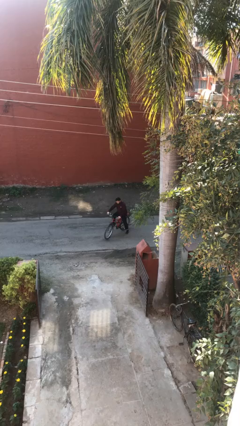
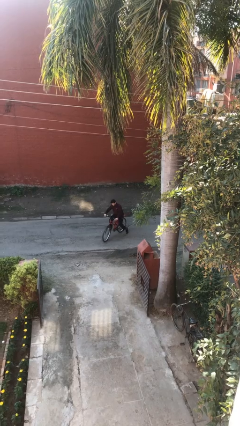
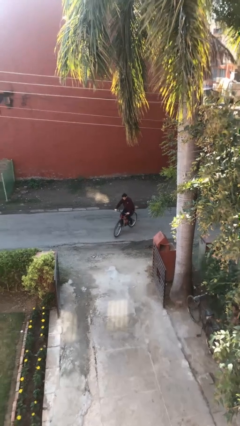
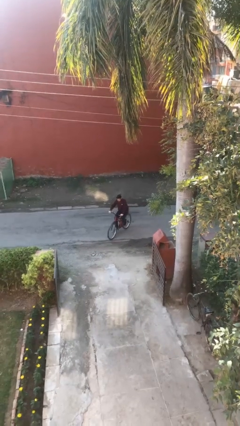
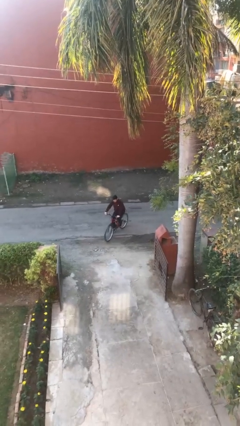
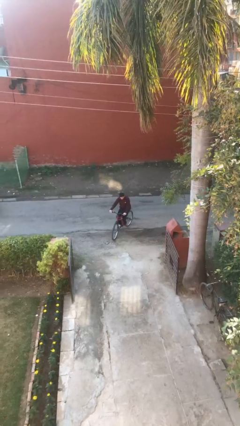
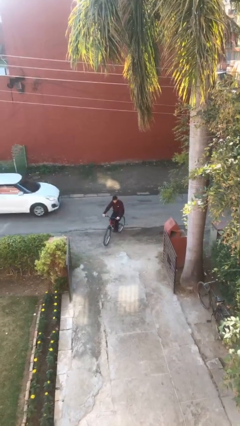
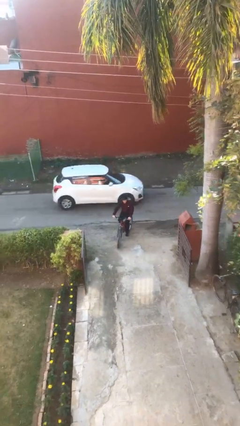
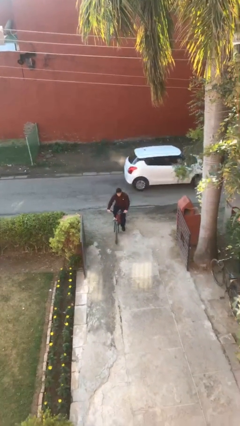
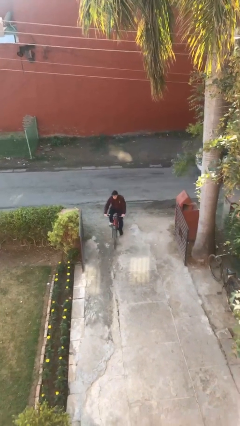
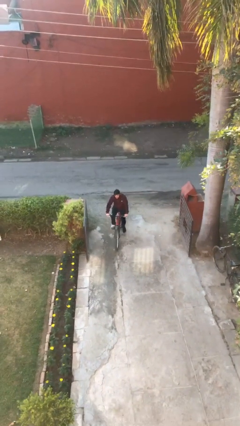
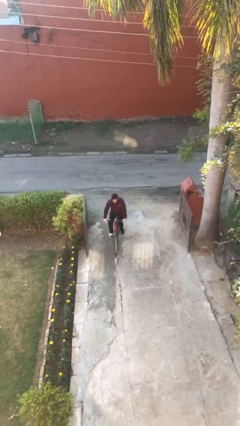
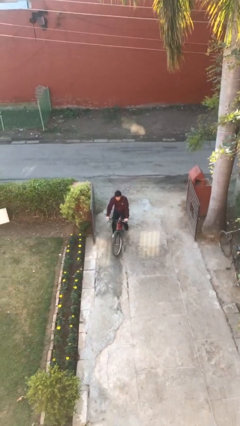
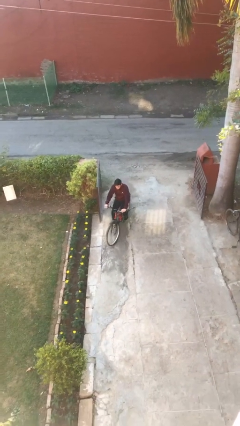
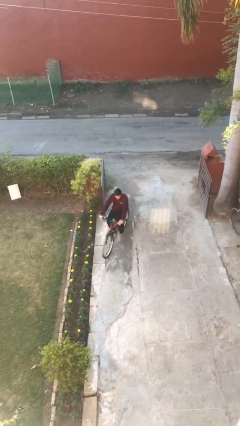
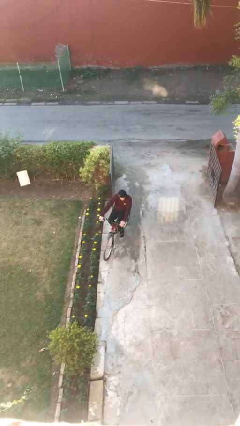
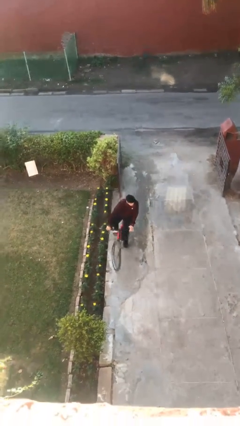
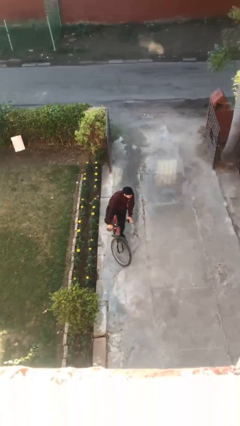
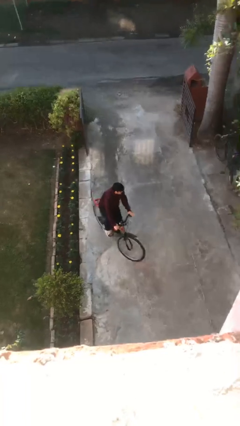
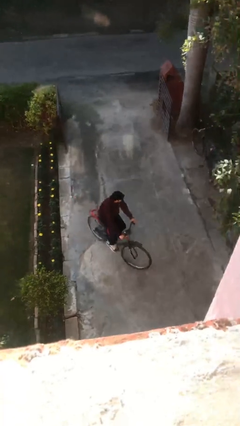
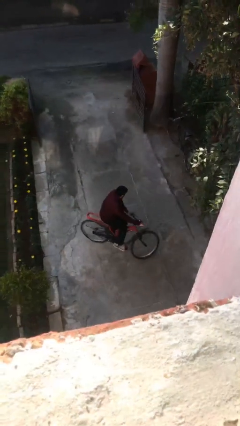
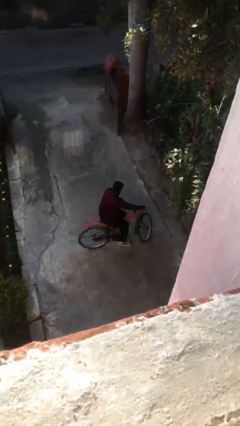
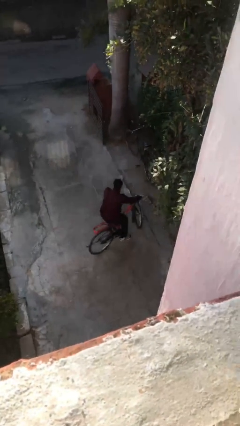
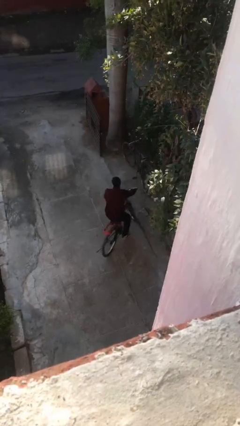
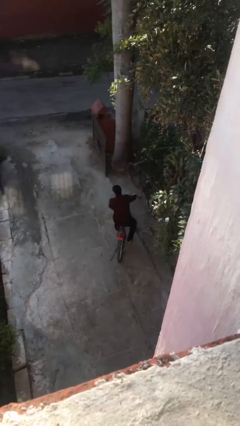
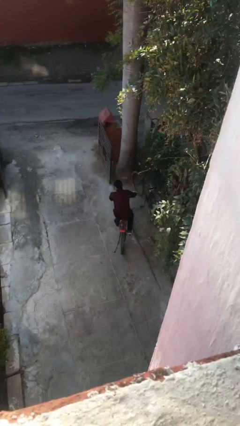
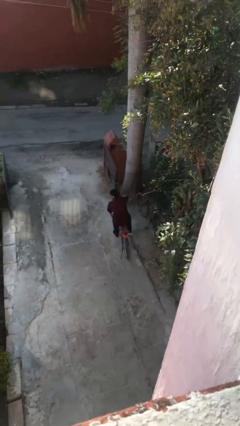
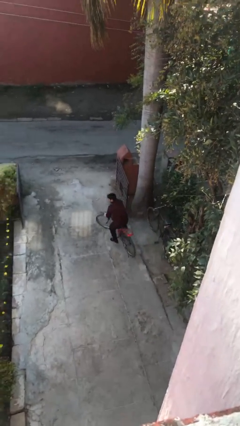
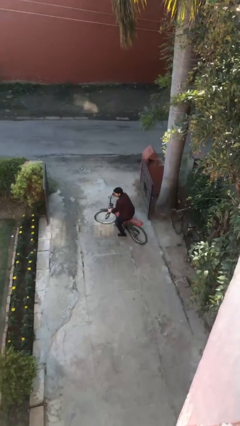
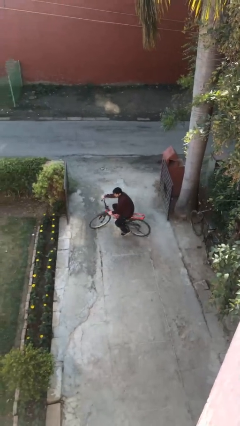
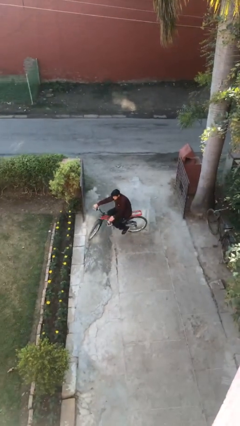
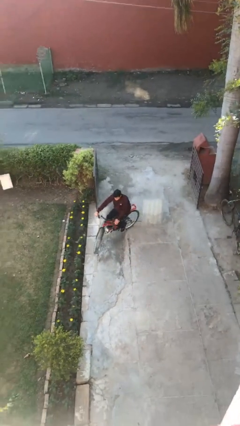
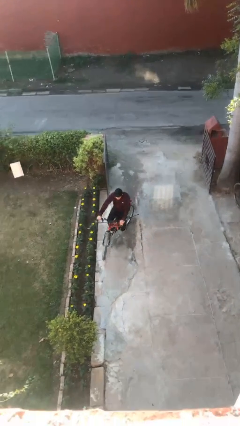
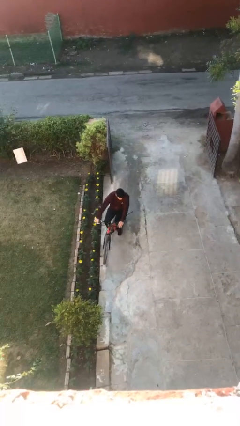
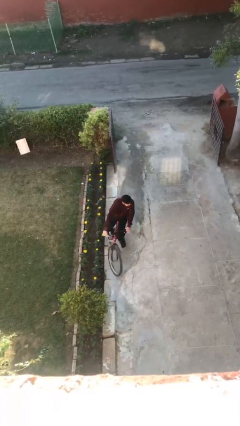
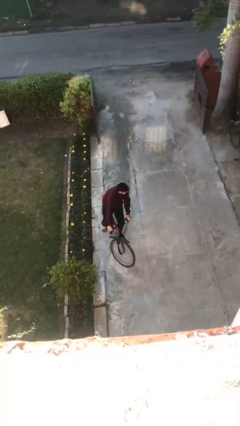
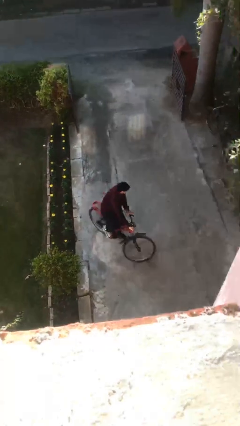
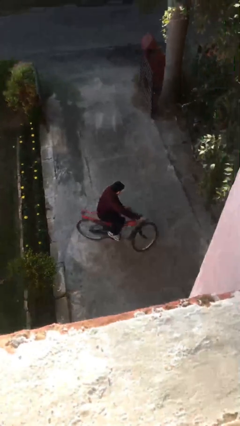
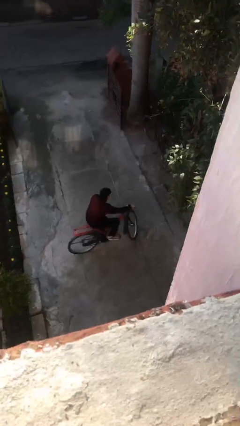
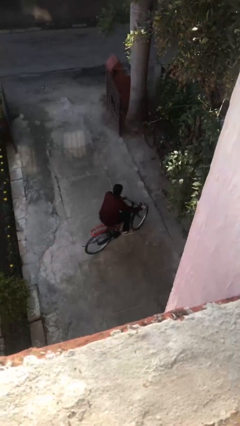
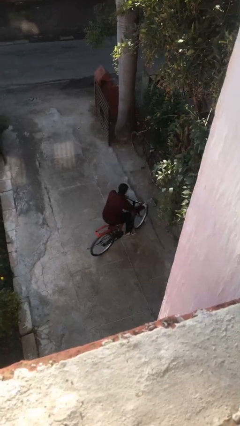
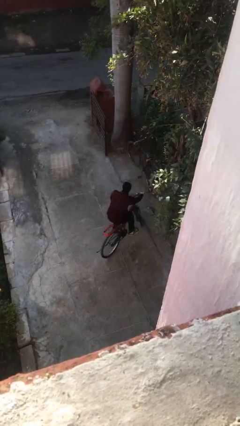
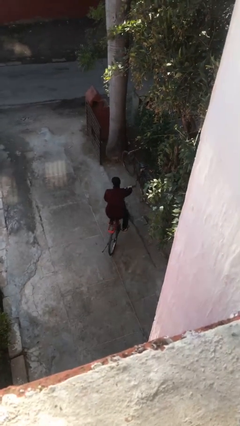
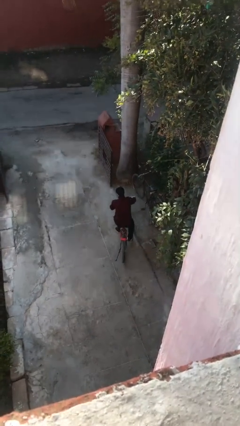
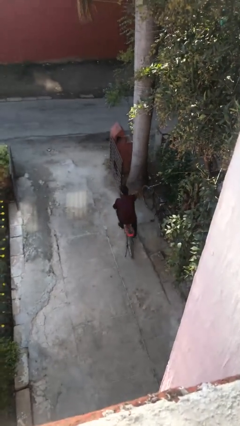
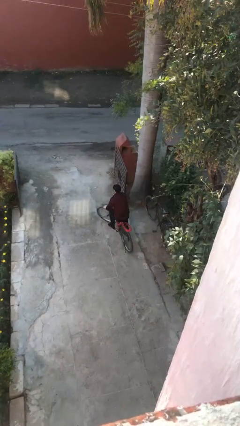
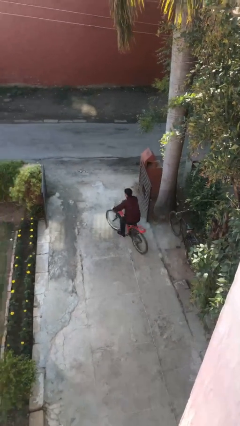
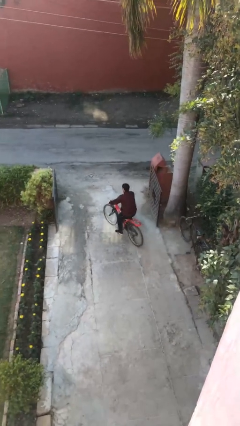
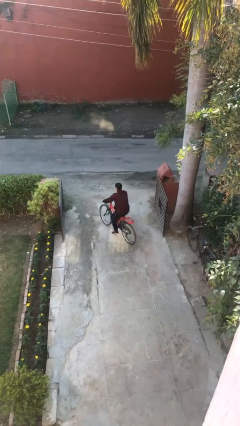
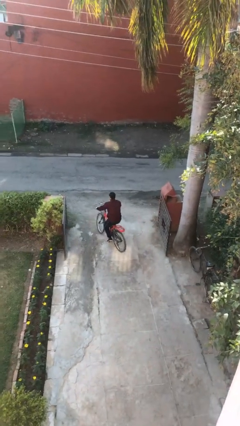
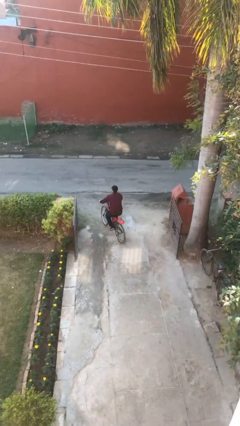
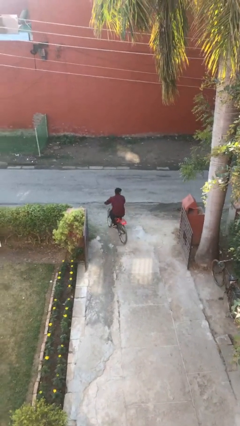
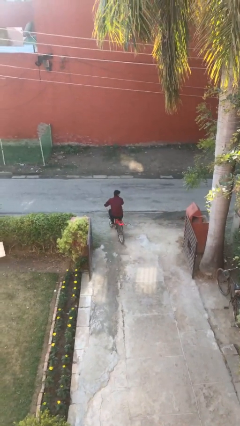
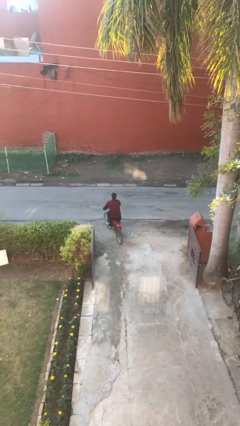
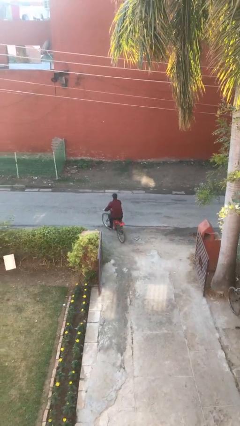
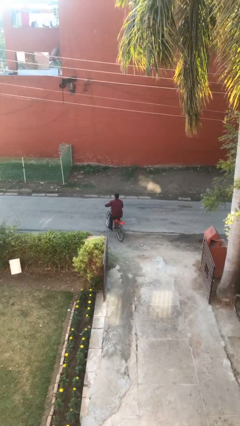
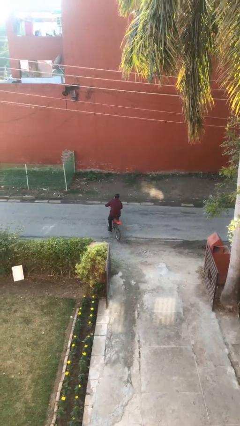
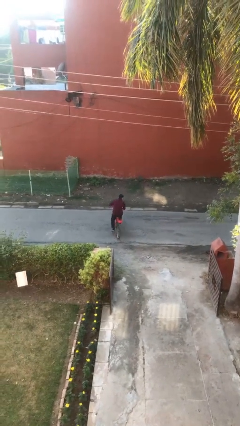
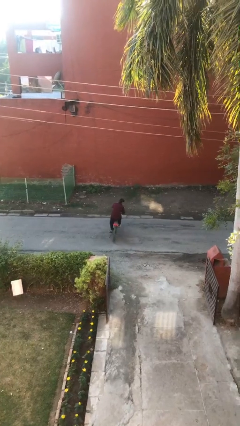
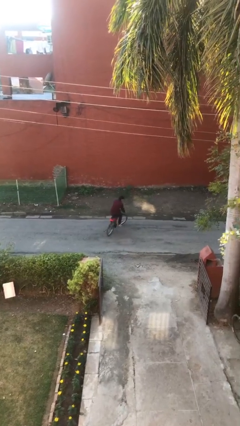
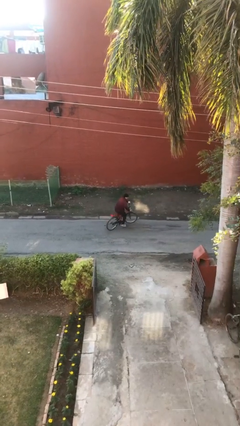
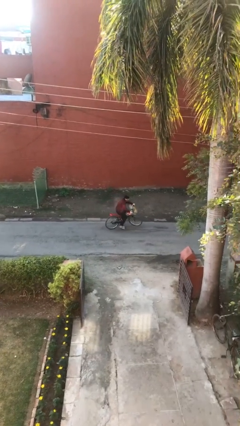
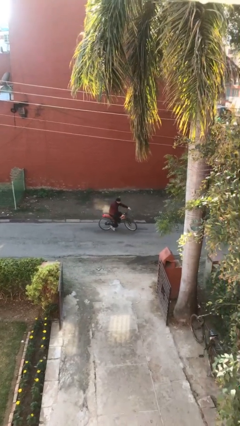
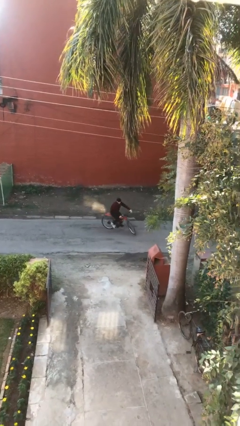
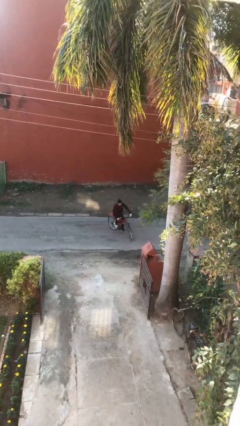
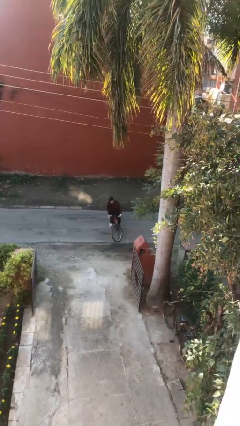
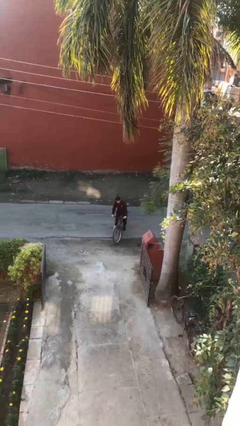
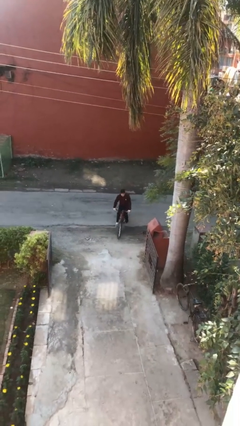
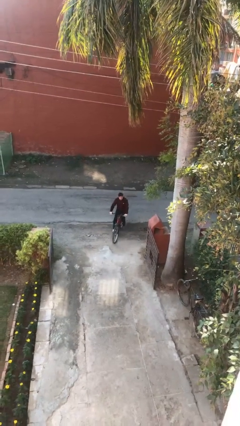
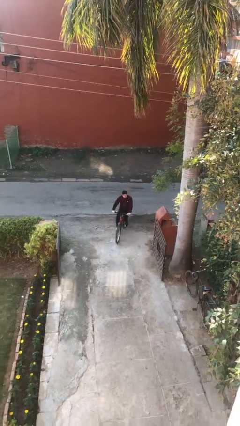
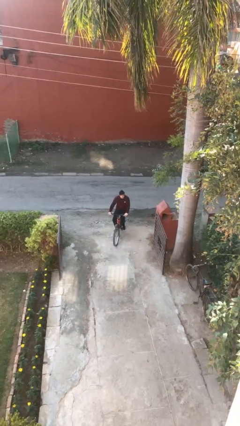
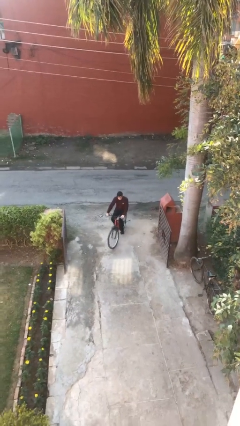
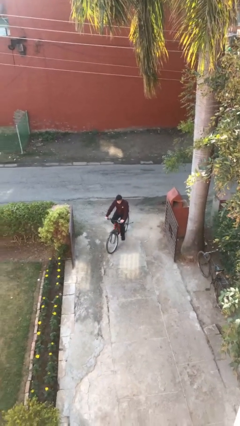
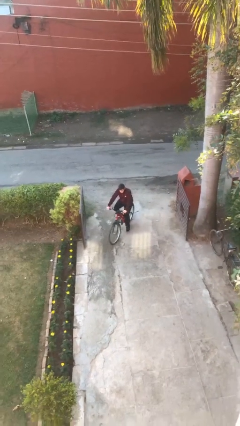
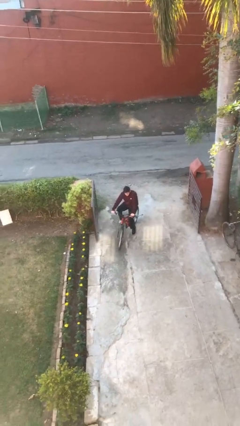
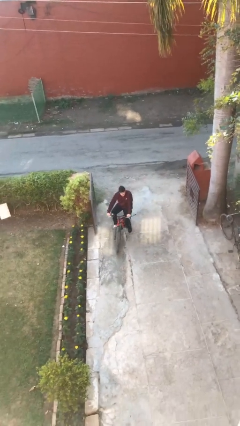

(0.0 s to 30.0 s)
person rides bicycle

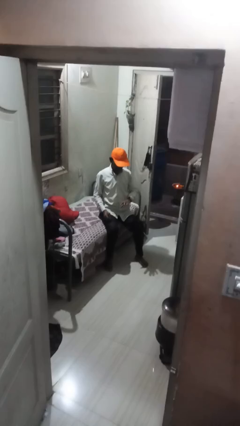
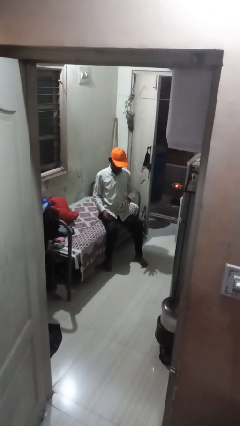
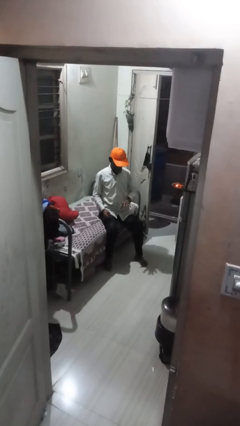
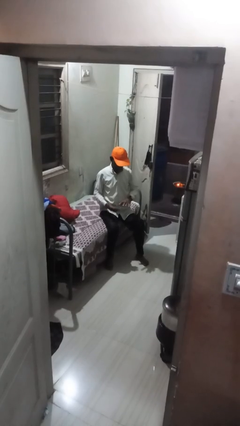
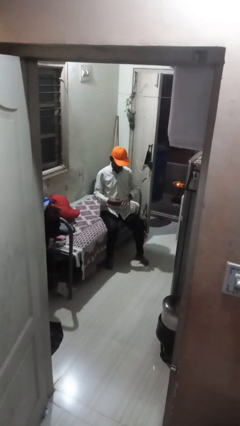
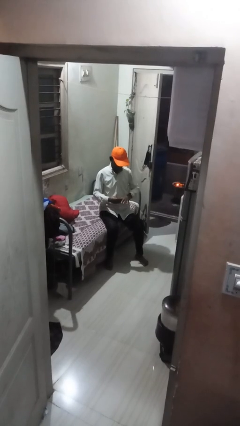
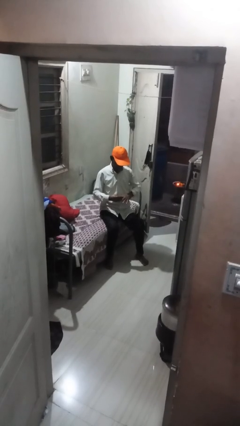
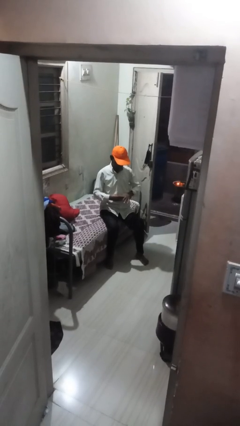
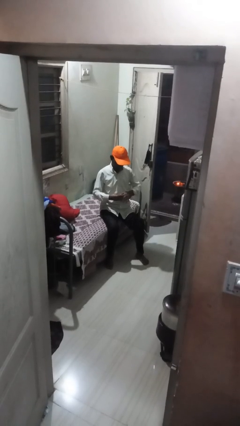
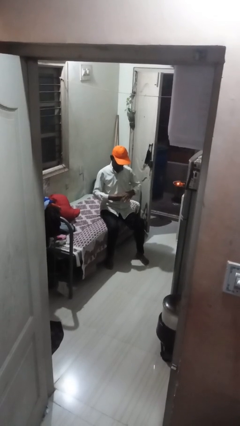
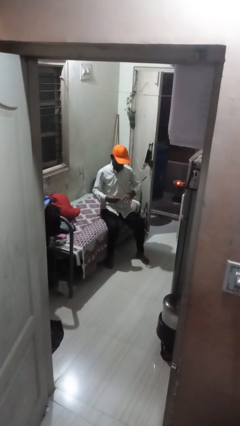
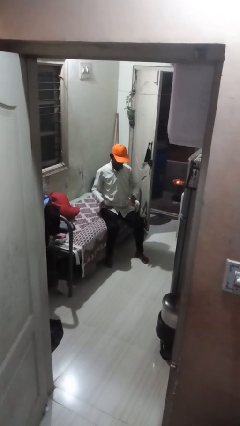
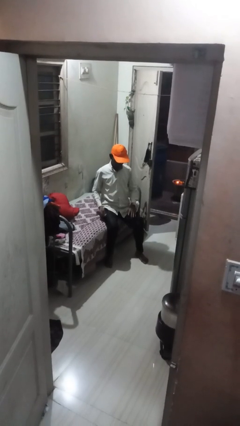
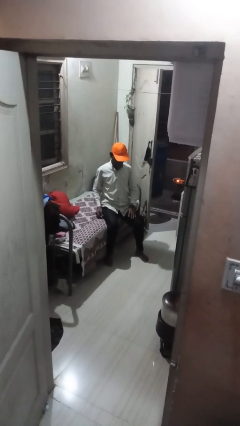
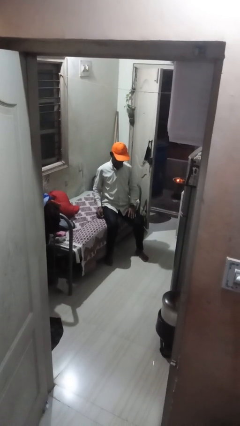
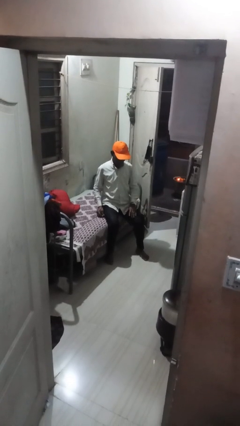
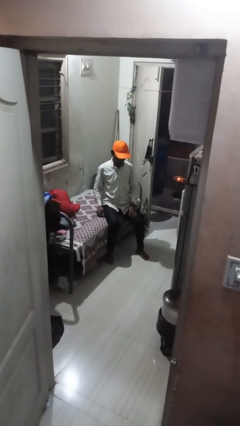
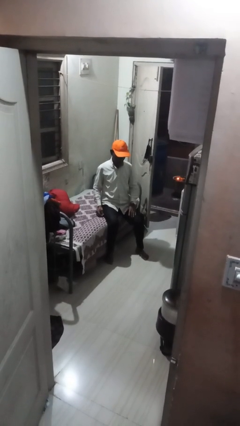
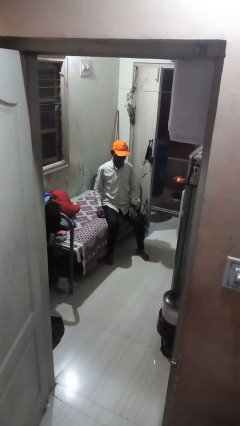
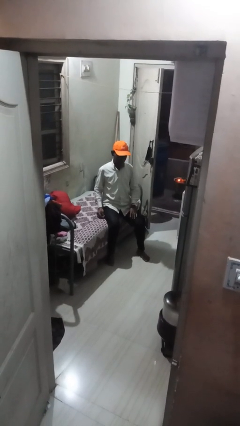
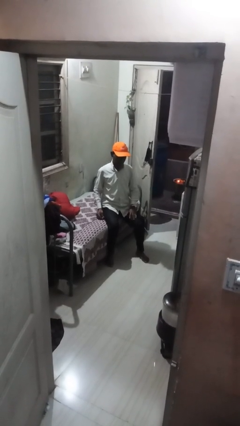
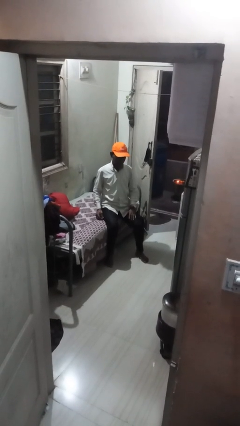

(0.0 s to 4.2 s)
person takes off ring
